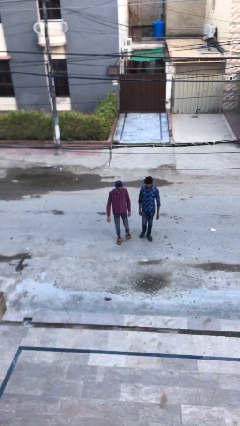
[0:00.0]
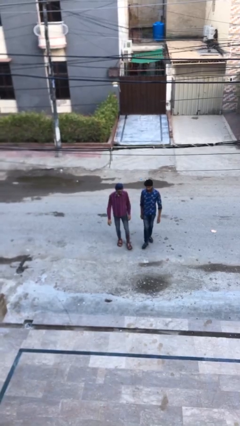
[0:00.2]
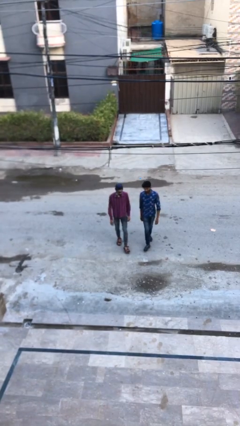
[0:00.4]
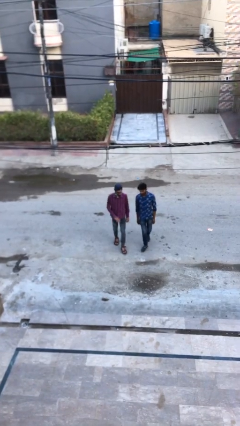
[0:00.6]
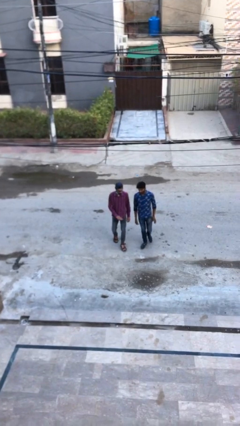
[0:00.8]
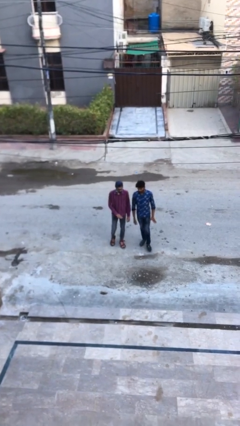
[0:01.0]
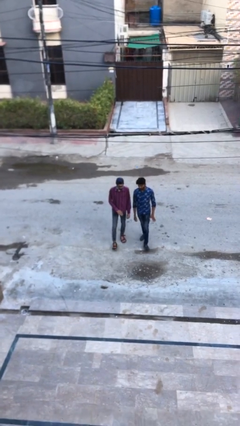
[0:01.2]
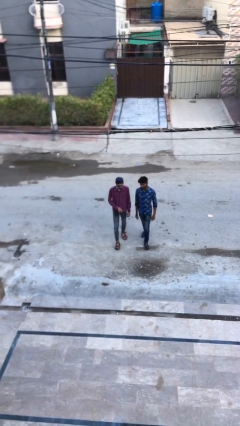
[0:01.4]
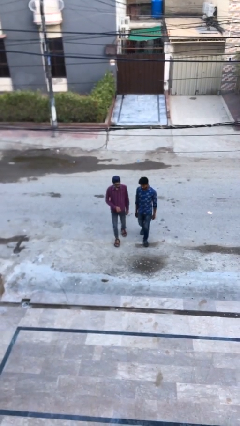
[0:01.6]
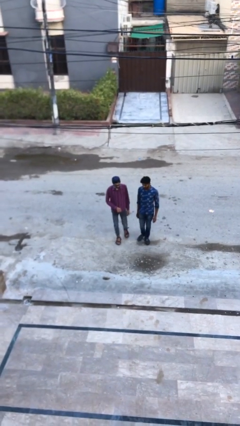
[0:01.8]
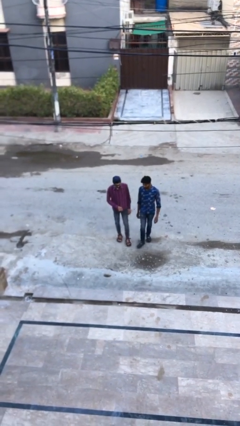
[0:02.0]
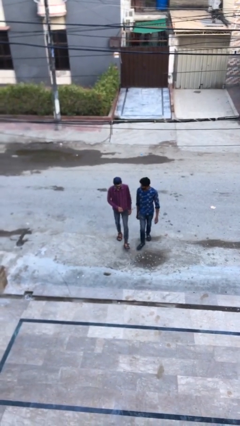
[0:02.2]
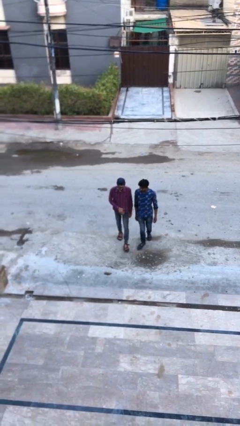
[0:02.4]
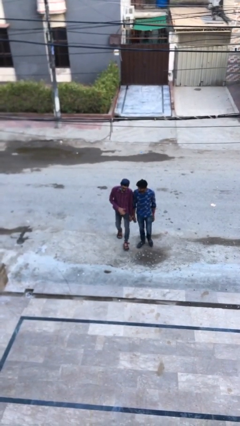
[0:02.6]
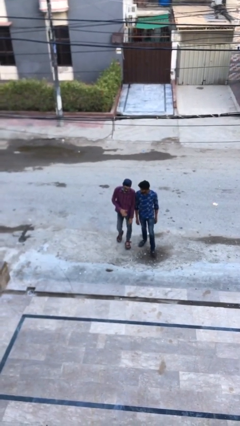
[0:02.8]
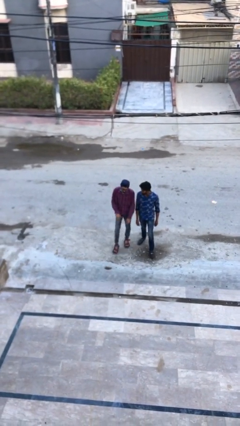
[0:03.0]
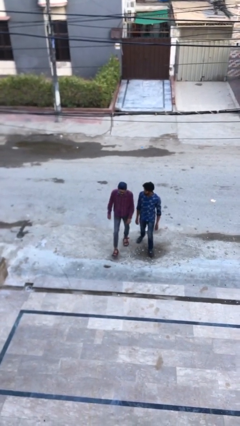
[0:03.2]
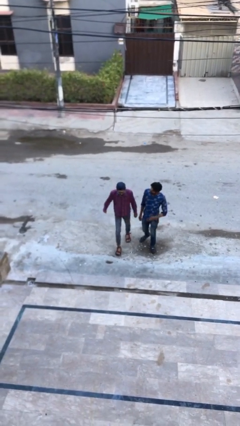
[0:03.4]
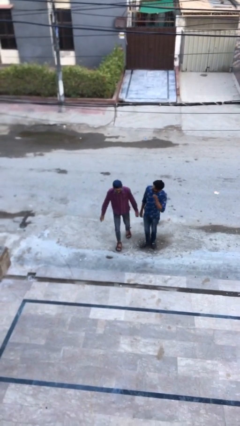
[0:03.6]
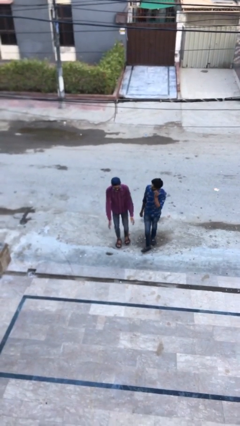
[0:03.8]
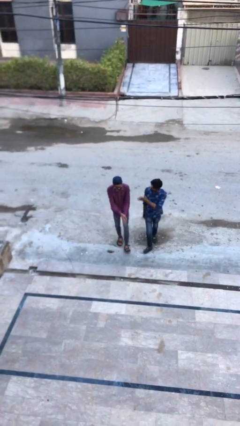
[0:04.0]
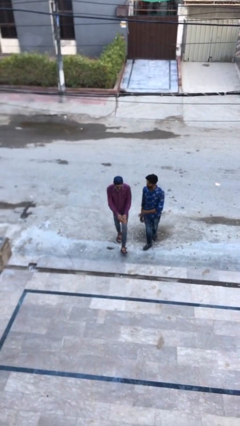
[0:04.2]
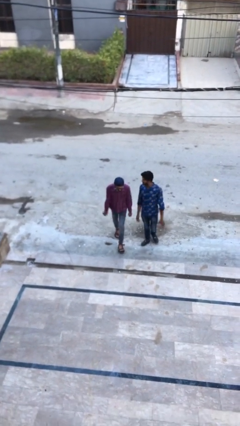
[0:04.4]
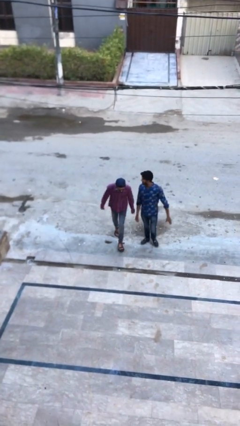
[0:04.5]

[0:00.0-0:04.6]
person talks to person

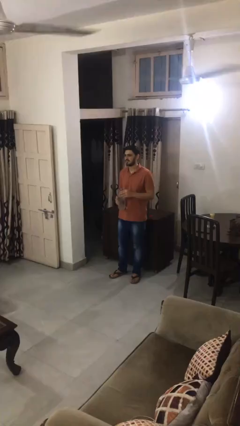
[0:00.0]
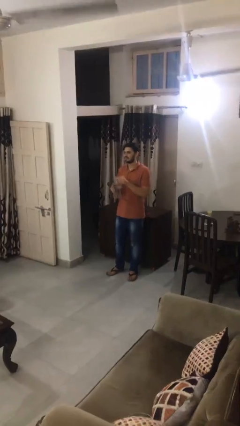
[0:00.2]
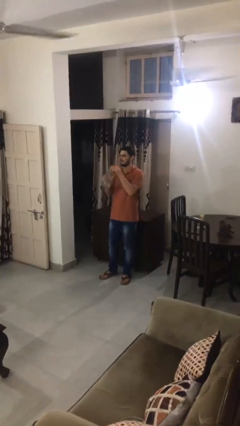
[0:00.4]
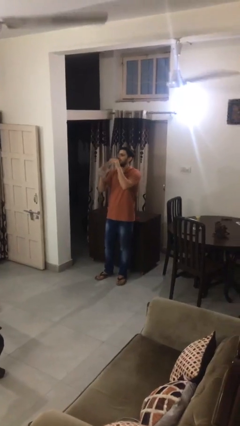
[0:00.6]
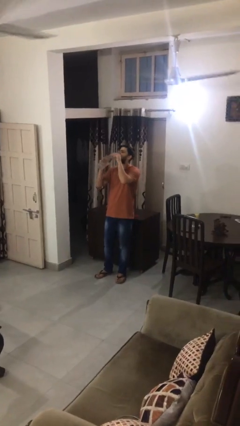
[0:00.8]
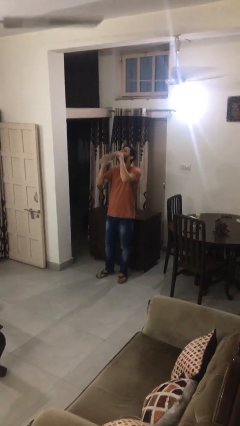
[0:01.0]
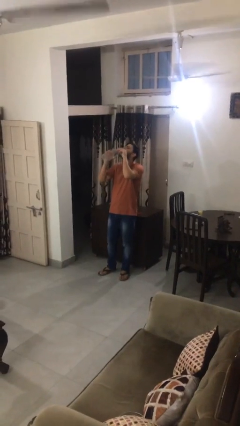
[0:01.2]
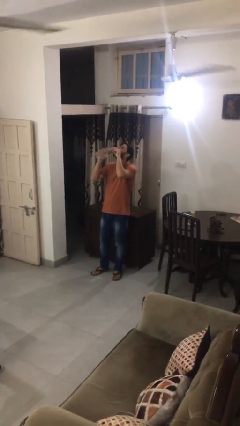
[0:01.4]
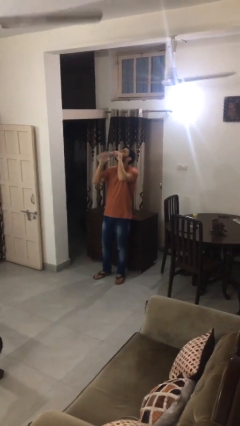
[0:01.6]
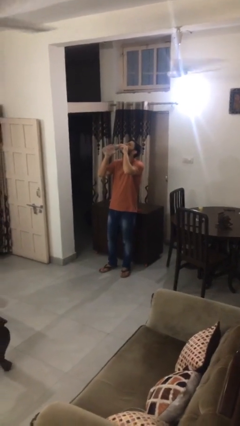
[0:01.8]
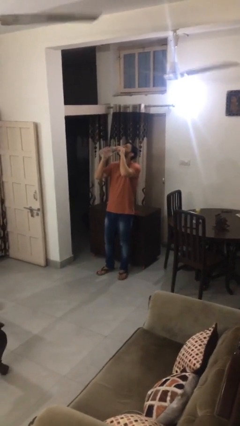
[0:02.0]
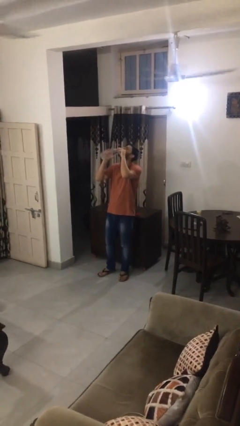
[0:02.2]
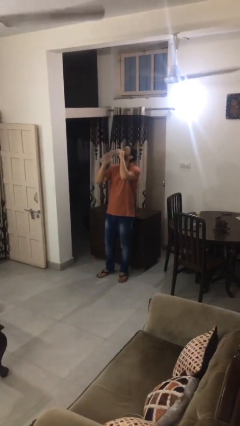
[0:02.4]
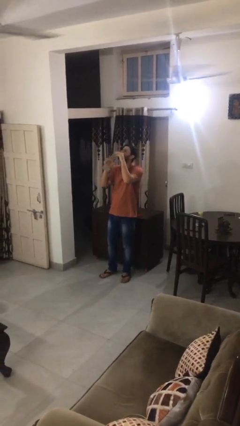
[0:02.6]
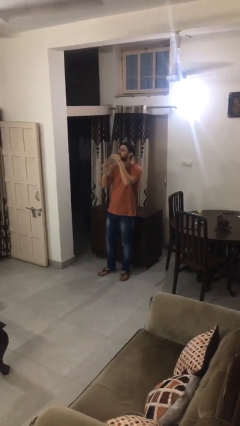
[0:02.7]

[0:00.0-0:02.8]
person drinks from bottle

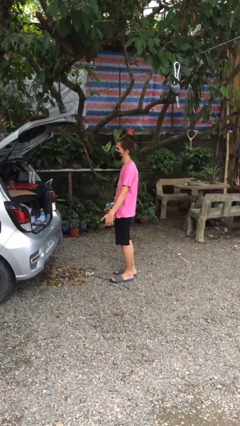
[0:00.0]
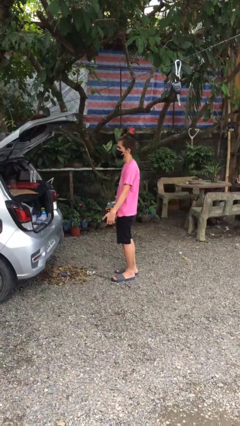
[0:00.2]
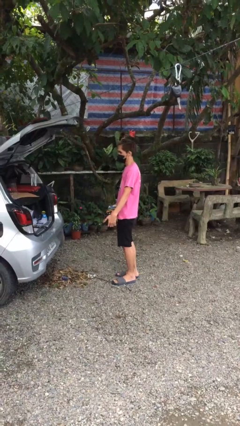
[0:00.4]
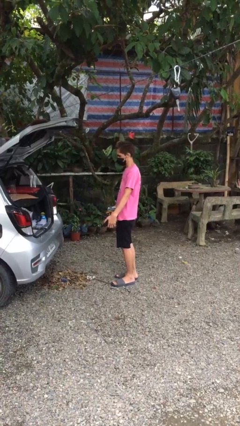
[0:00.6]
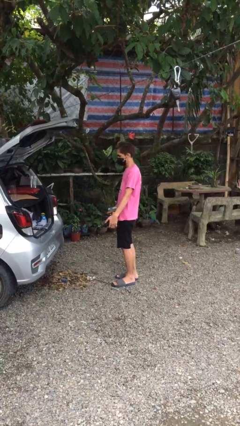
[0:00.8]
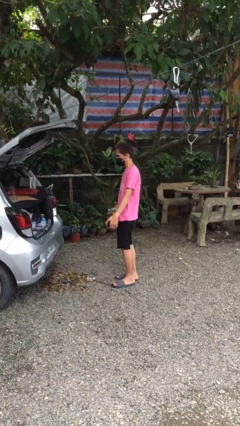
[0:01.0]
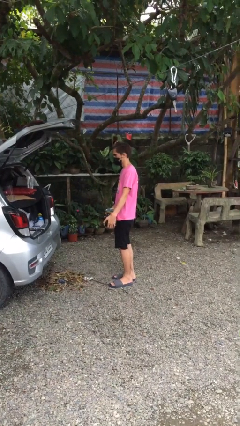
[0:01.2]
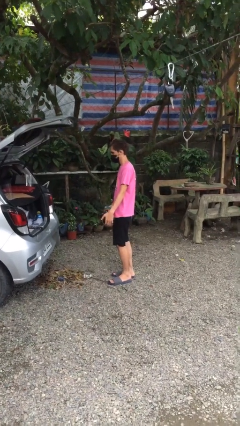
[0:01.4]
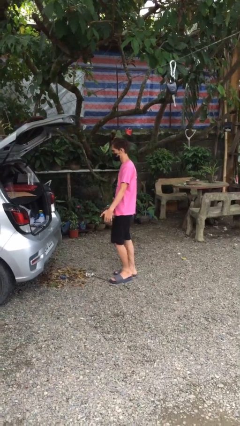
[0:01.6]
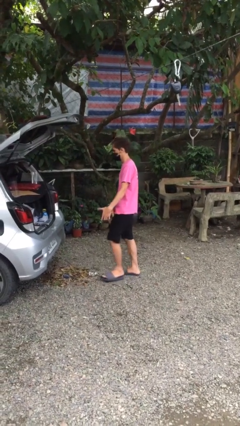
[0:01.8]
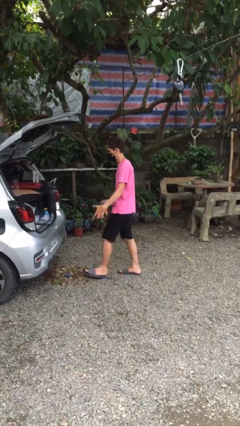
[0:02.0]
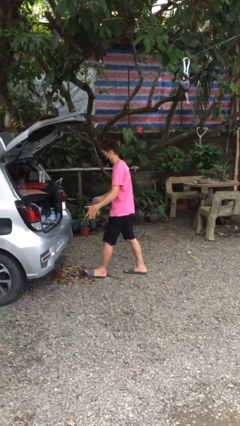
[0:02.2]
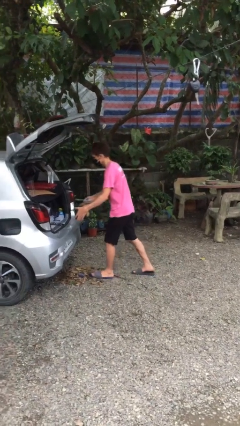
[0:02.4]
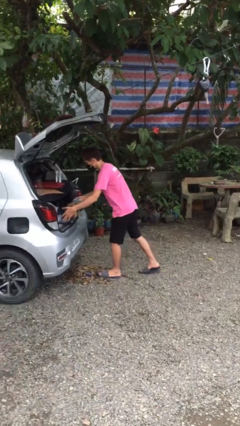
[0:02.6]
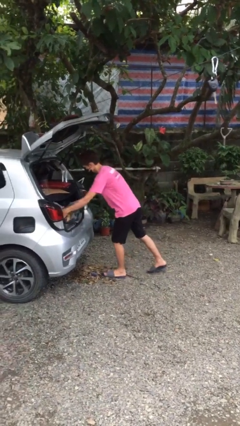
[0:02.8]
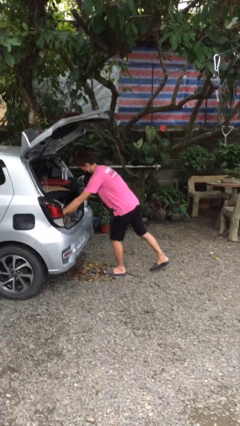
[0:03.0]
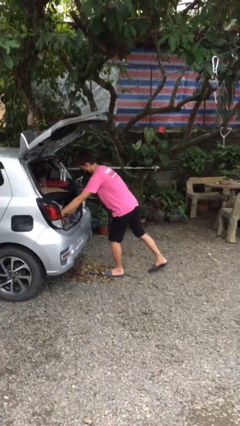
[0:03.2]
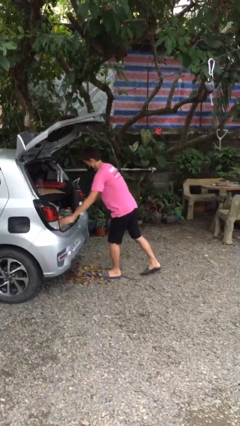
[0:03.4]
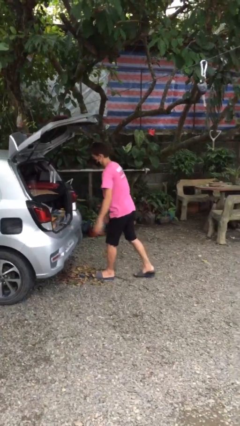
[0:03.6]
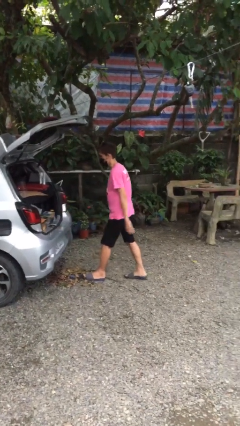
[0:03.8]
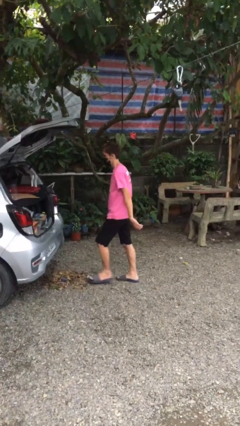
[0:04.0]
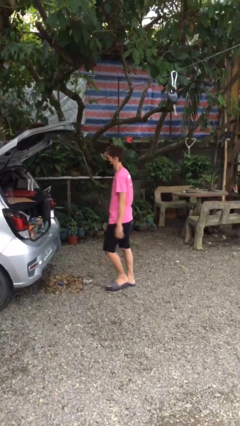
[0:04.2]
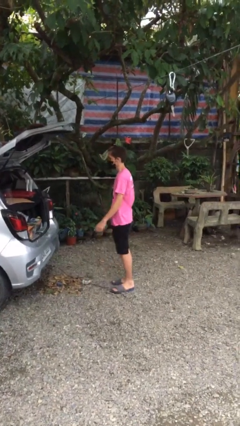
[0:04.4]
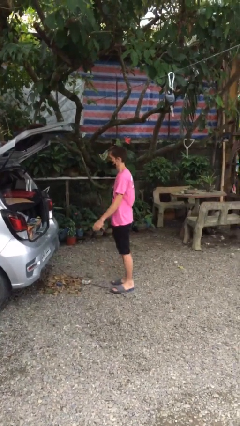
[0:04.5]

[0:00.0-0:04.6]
person loads car

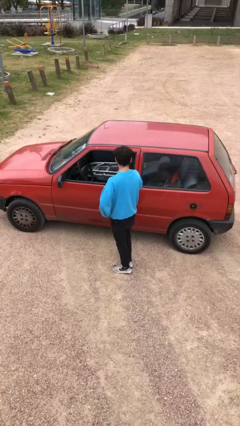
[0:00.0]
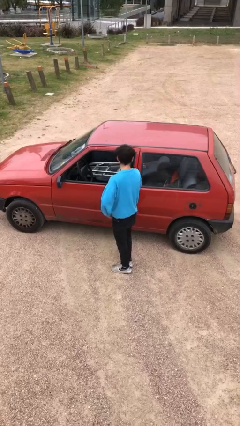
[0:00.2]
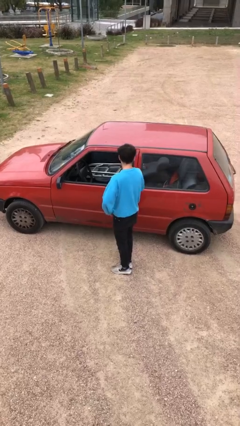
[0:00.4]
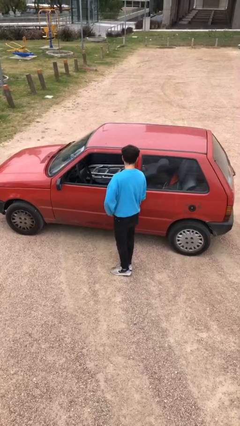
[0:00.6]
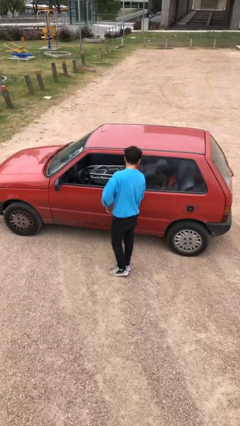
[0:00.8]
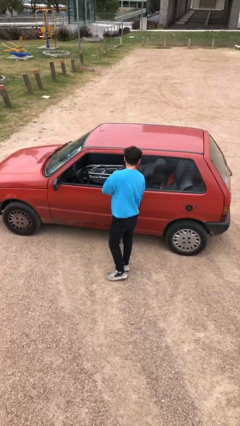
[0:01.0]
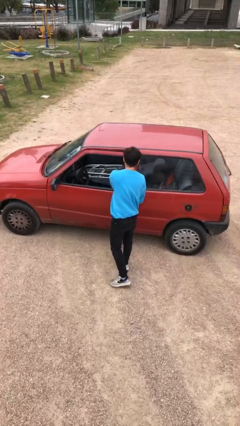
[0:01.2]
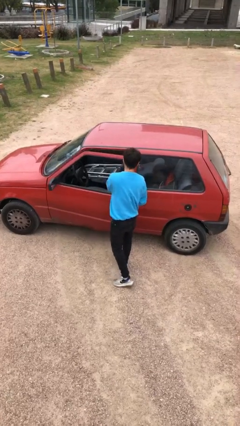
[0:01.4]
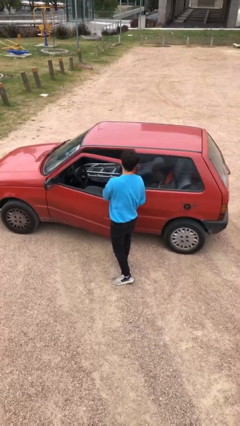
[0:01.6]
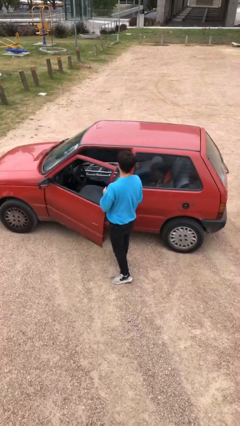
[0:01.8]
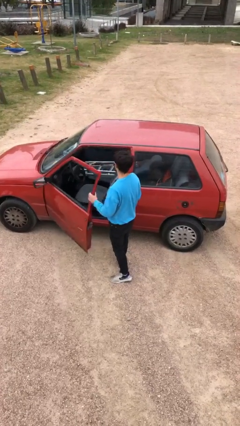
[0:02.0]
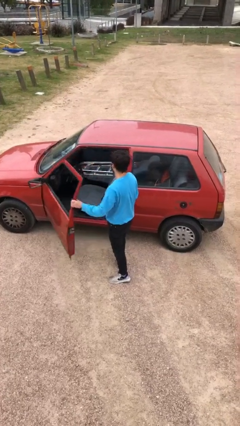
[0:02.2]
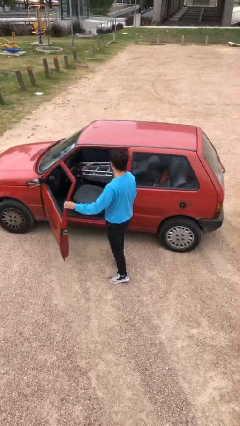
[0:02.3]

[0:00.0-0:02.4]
person opens car door

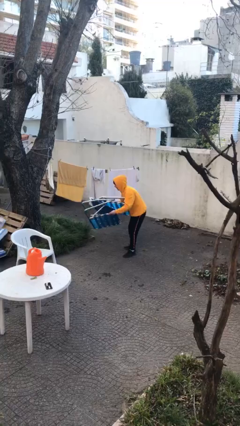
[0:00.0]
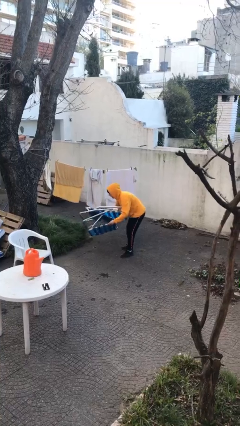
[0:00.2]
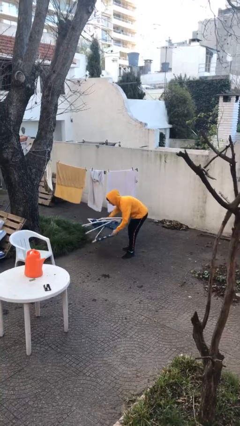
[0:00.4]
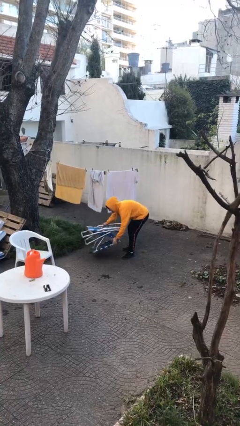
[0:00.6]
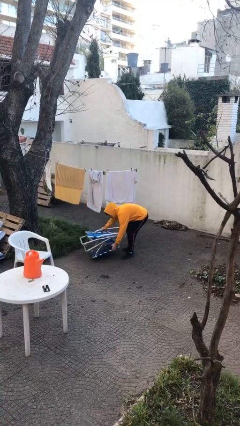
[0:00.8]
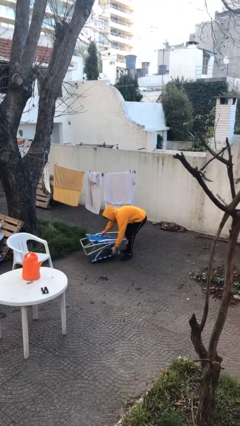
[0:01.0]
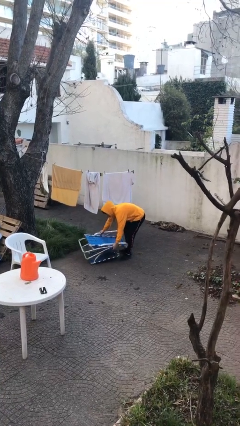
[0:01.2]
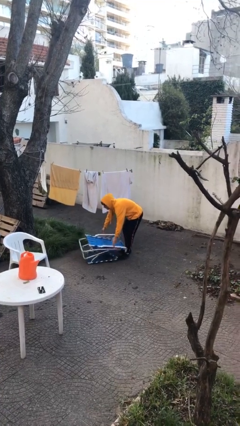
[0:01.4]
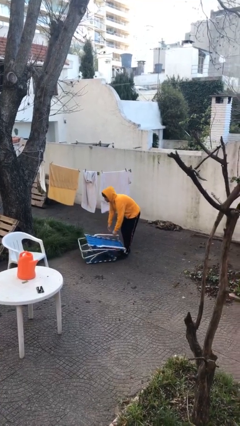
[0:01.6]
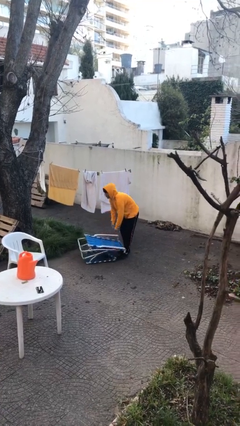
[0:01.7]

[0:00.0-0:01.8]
person puts down object on floor

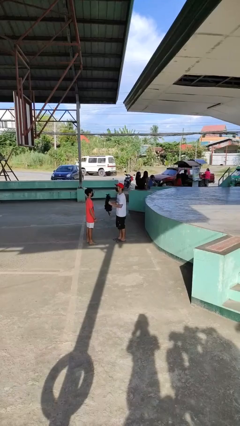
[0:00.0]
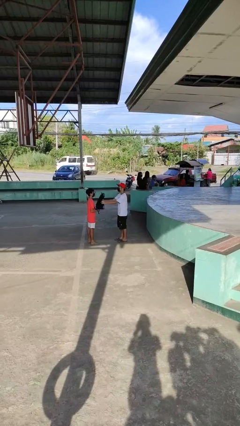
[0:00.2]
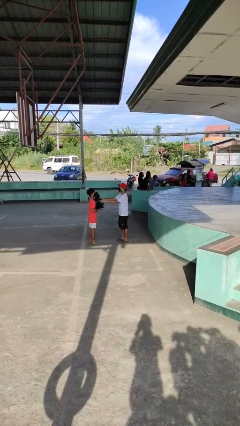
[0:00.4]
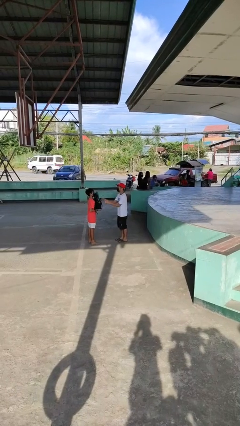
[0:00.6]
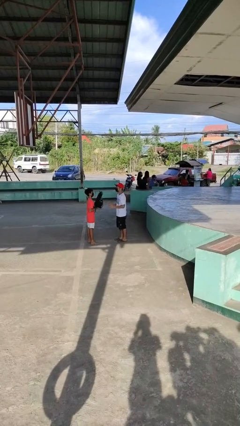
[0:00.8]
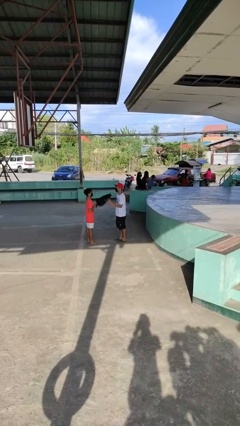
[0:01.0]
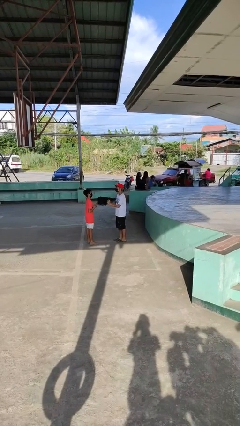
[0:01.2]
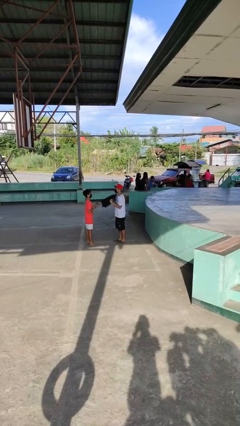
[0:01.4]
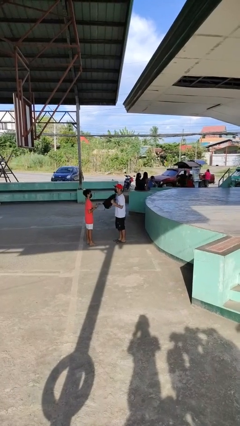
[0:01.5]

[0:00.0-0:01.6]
person transfers object to person
